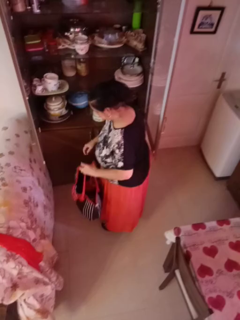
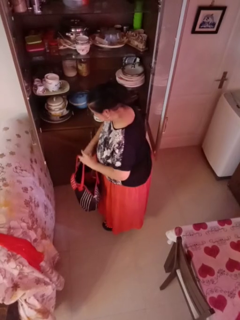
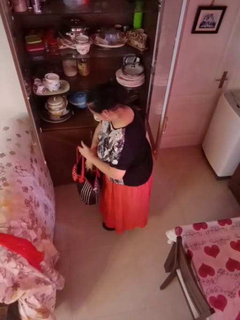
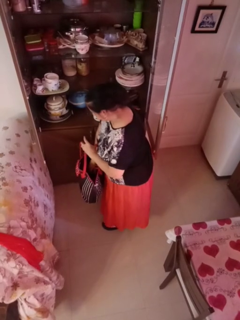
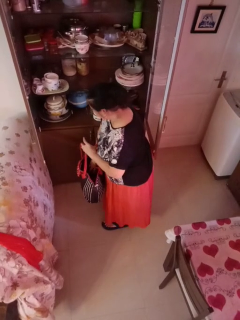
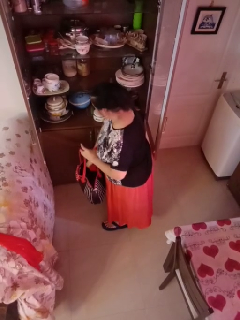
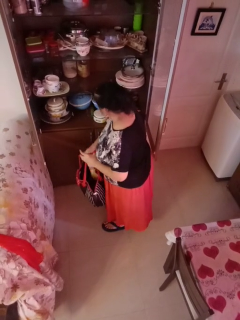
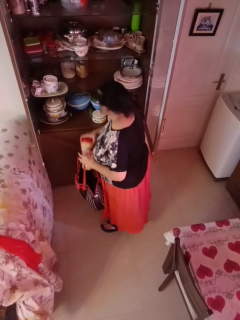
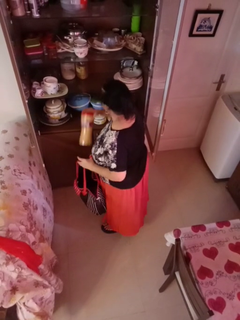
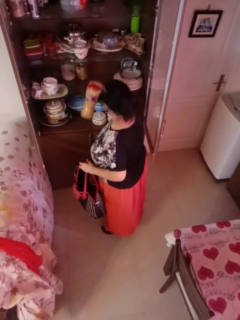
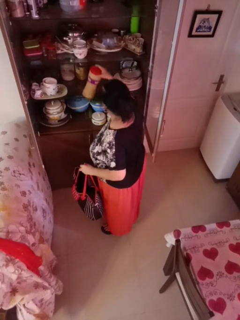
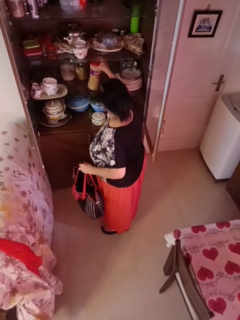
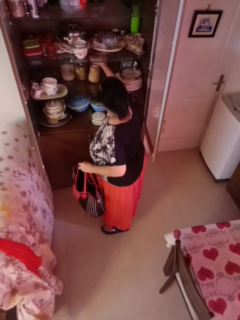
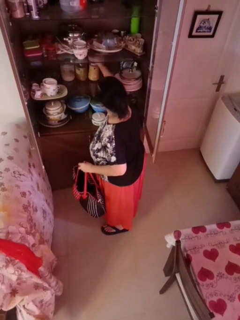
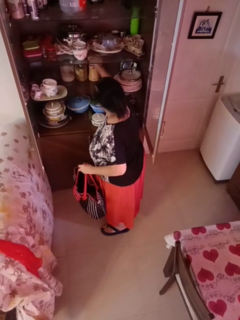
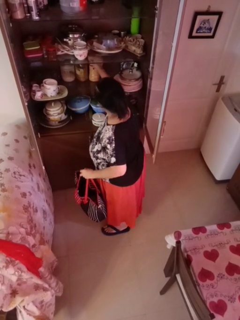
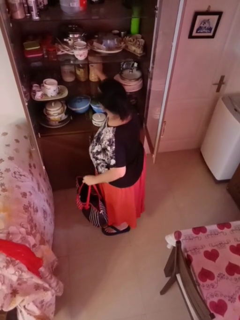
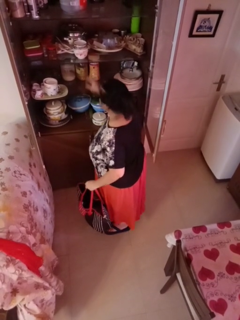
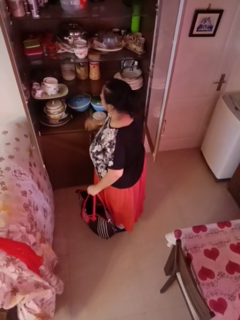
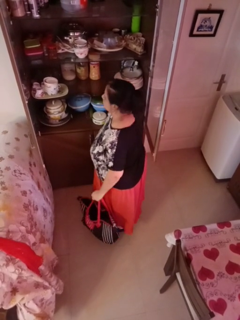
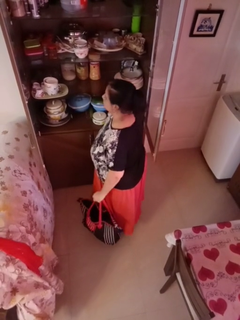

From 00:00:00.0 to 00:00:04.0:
person loads groceries into cabinet

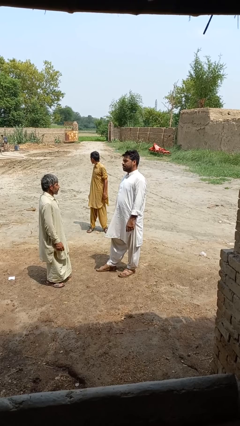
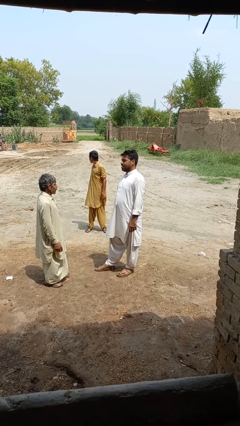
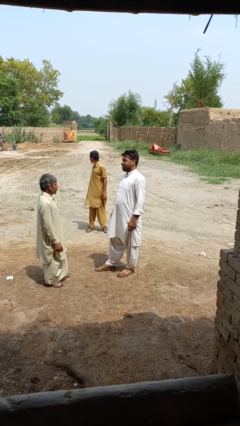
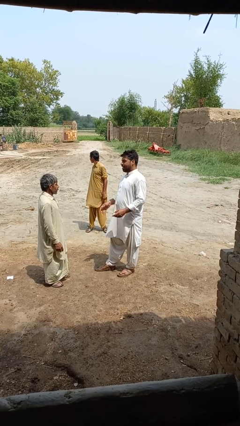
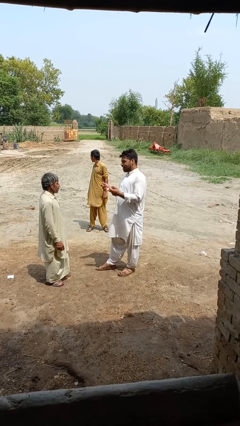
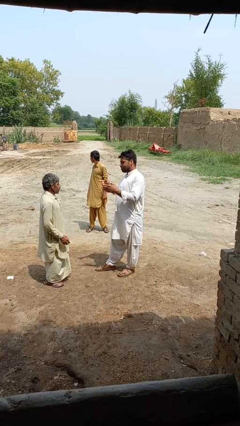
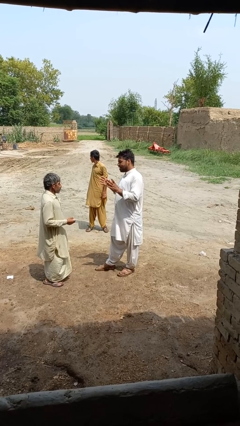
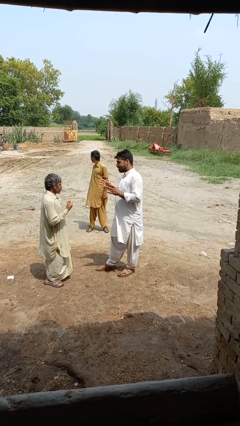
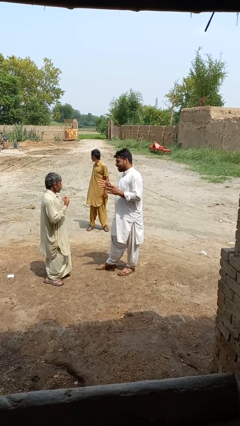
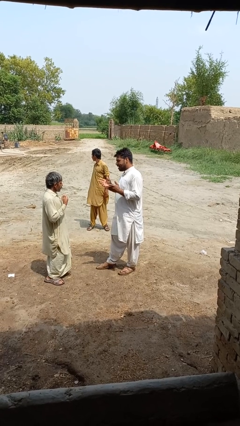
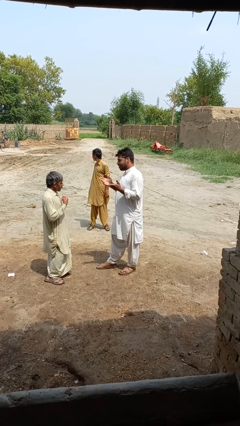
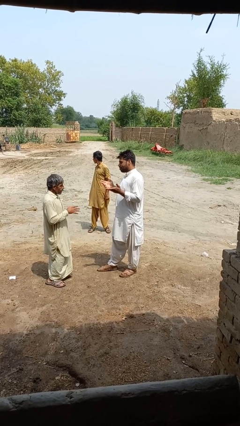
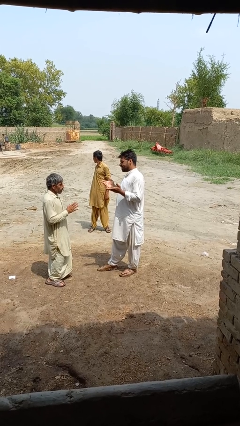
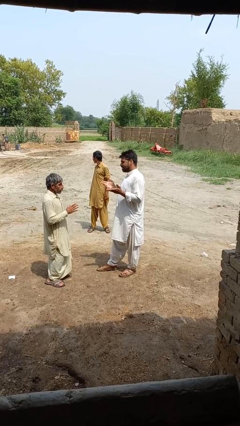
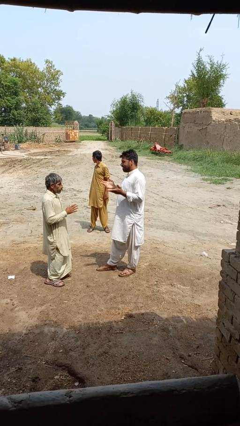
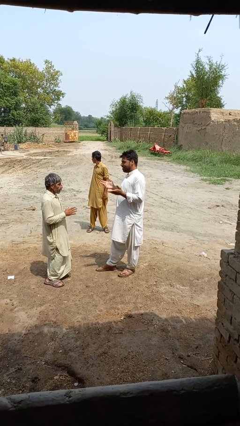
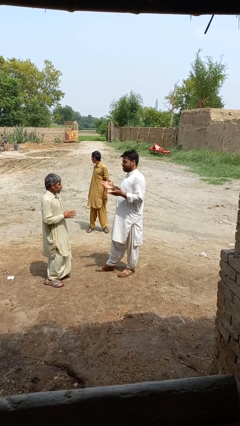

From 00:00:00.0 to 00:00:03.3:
person talks to person

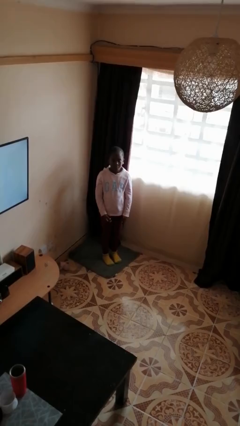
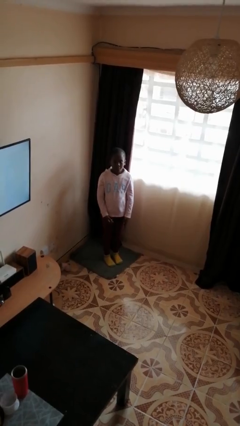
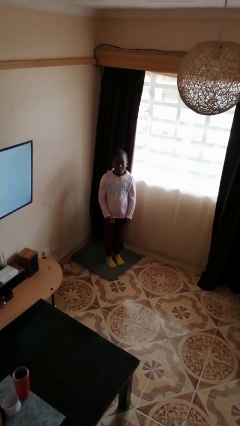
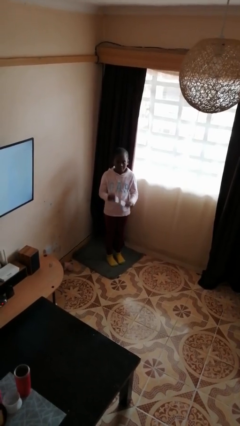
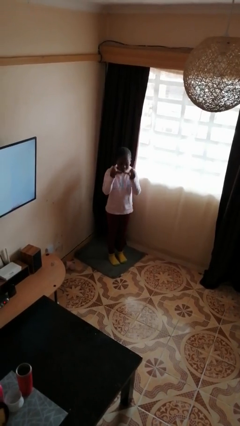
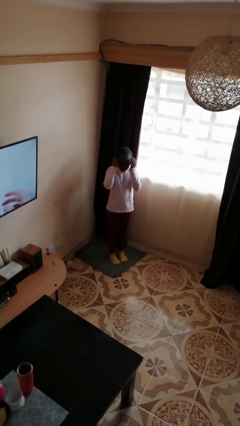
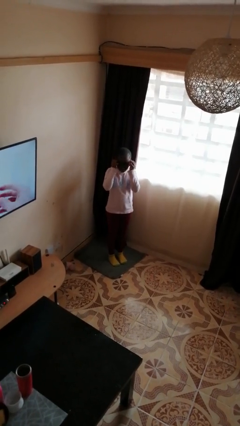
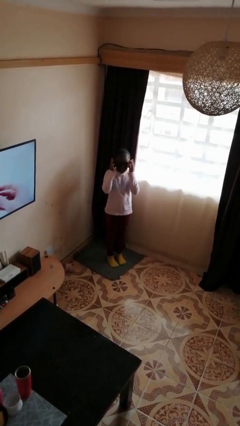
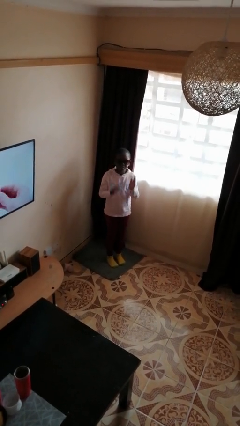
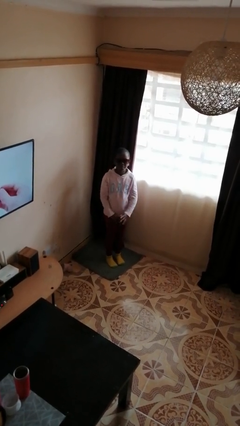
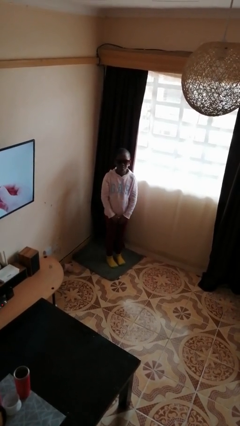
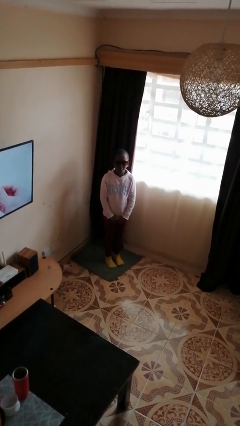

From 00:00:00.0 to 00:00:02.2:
person puts on sunglasses

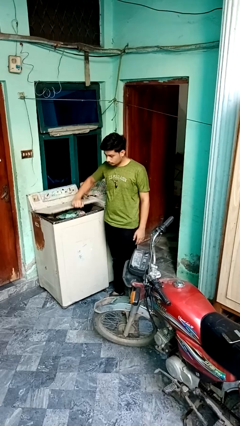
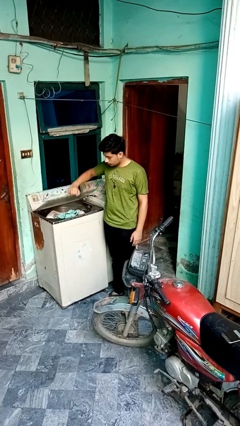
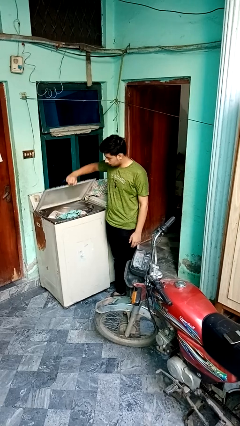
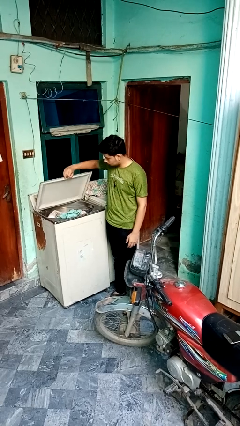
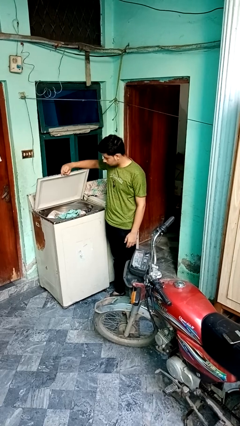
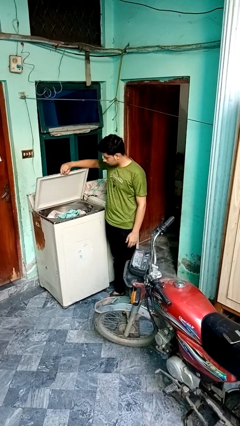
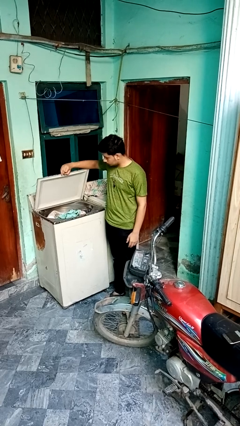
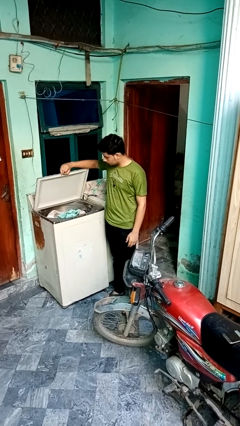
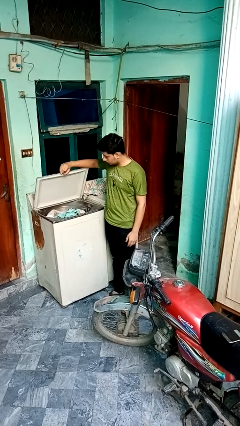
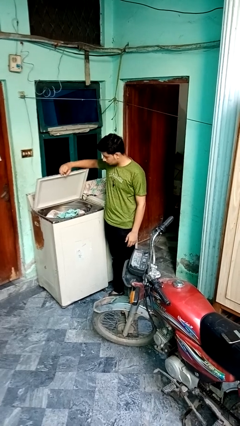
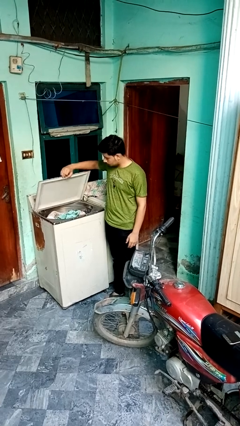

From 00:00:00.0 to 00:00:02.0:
person opens clothes washer

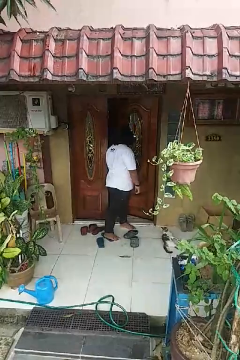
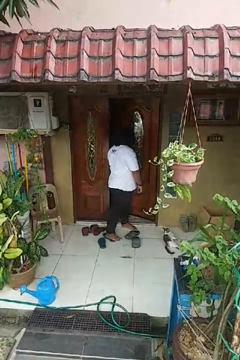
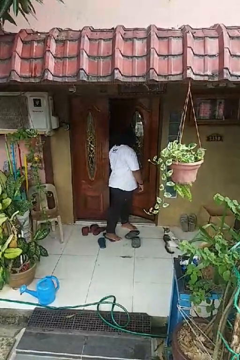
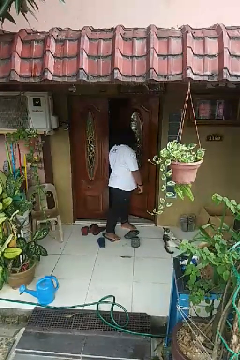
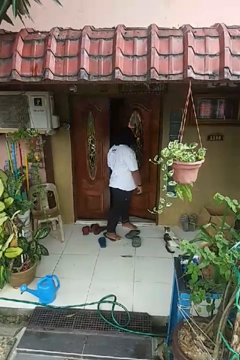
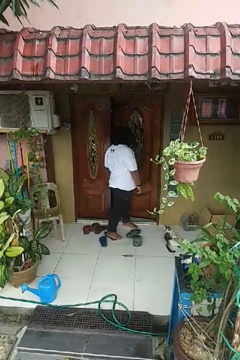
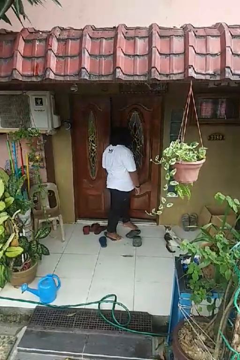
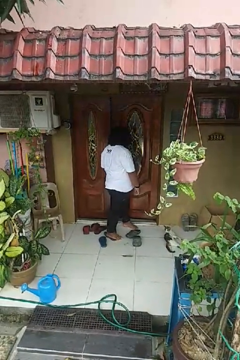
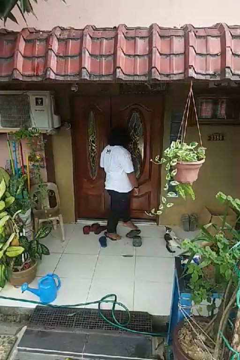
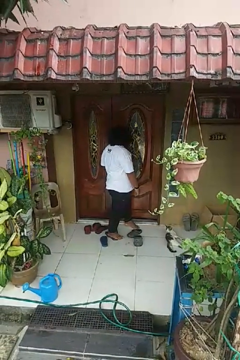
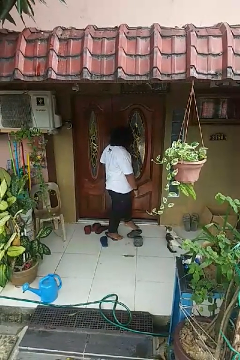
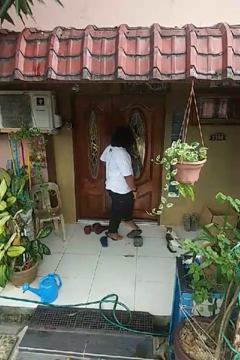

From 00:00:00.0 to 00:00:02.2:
person closes door with hip

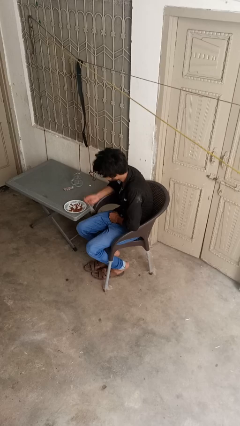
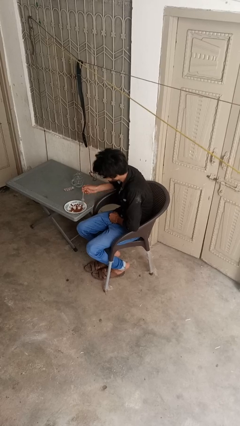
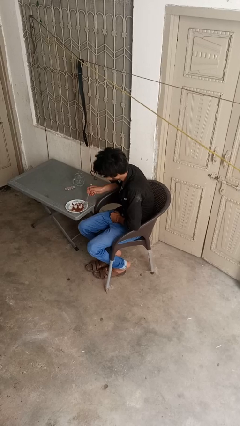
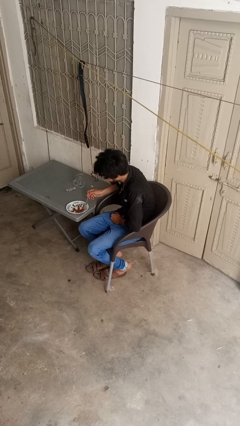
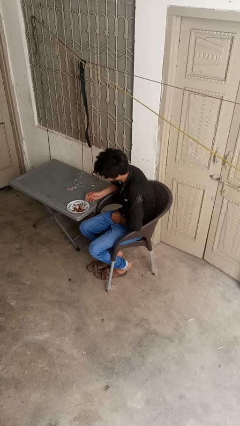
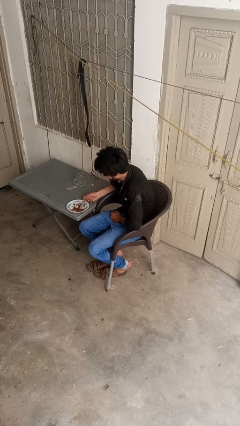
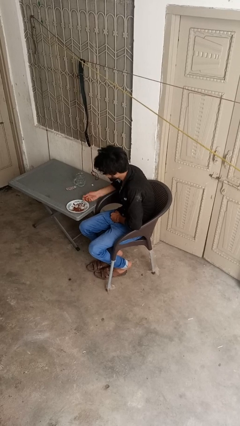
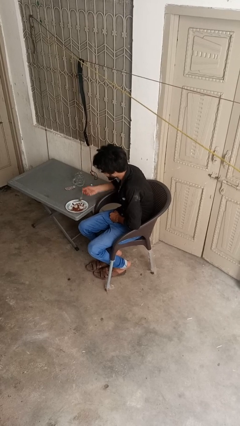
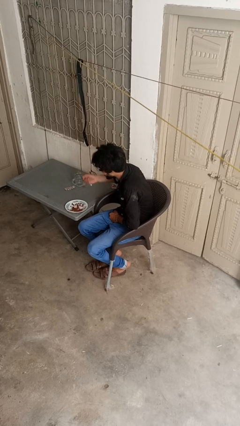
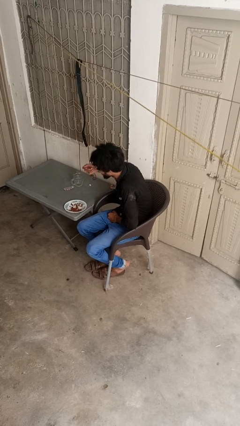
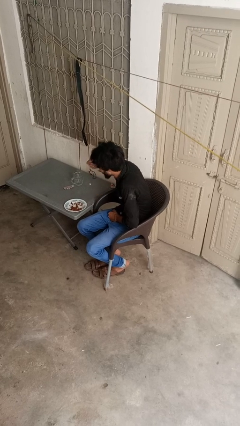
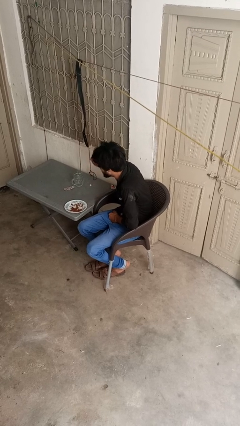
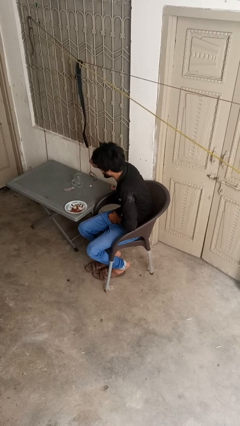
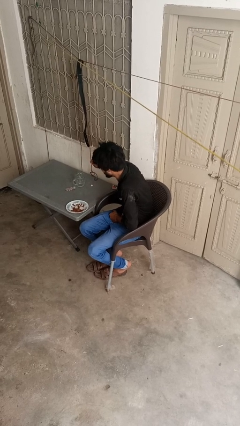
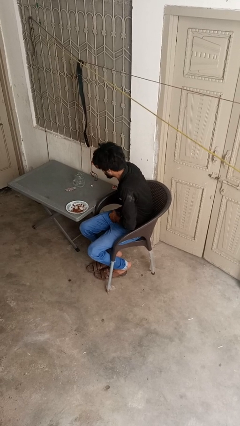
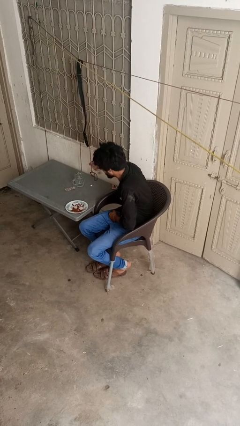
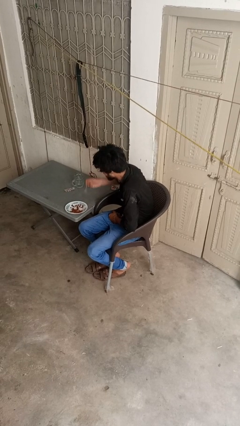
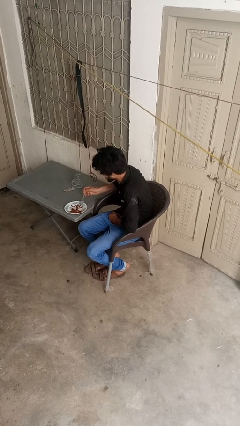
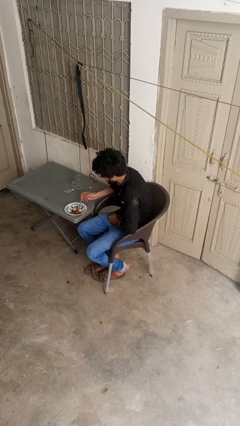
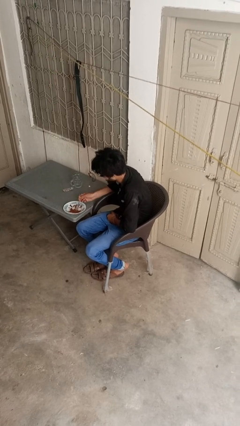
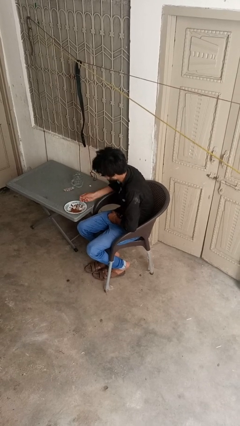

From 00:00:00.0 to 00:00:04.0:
person eats with utensil

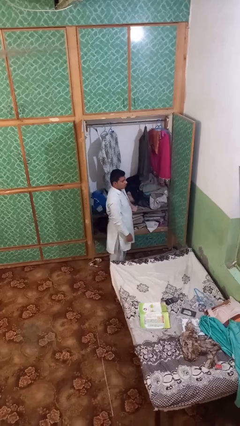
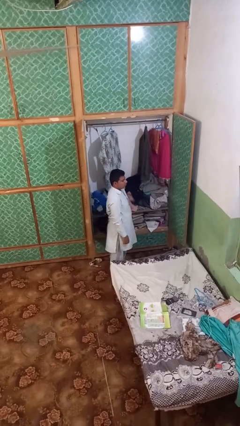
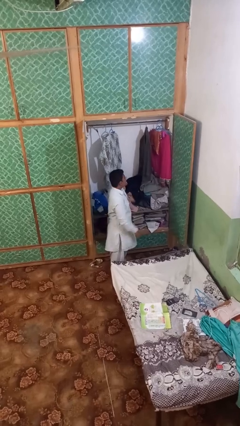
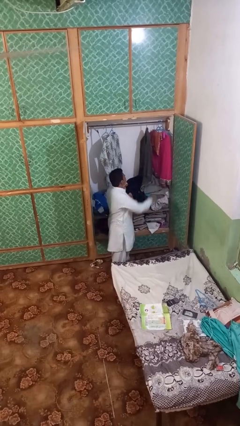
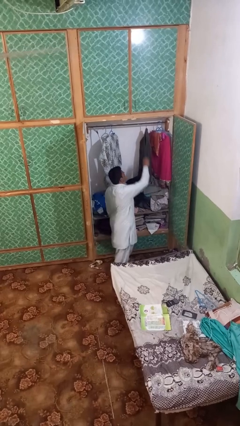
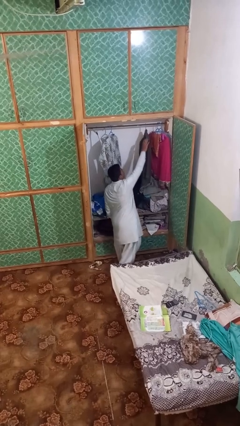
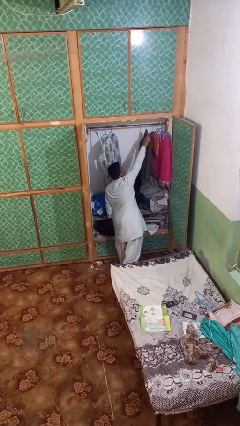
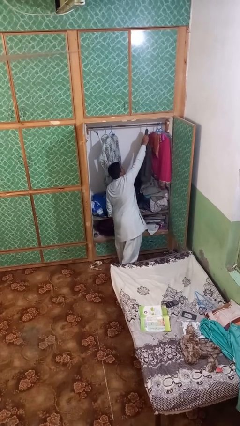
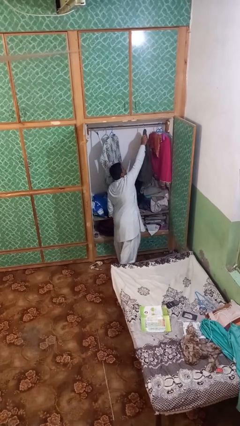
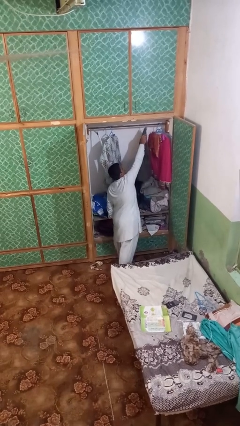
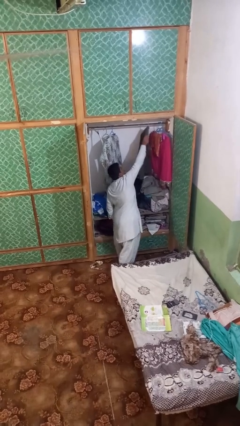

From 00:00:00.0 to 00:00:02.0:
person takes clothes from closet
